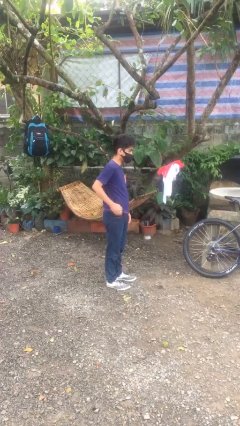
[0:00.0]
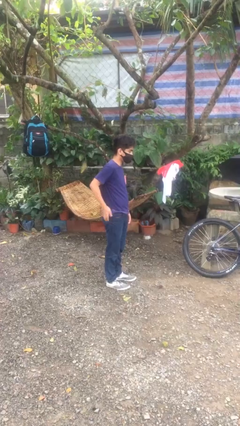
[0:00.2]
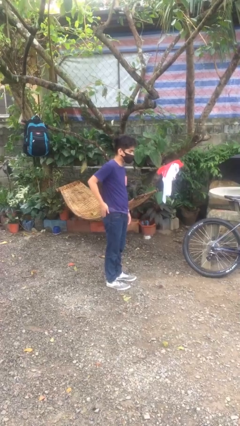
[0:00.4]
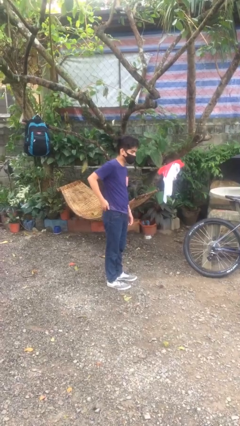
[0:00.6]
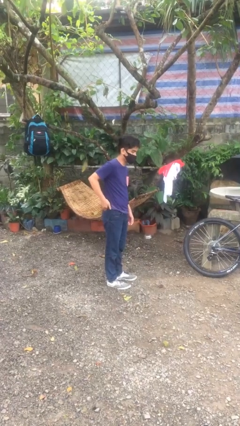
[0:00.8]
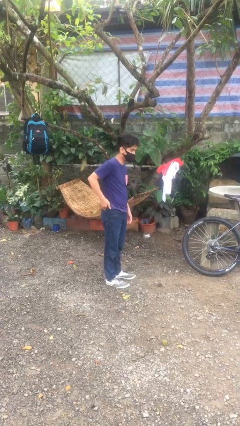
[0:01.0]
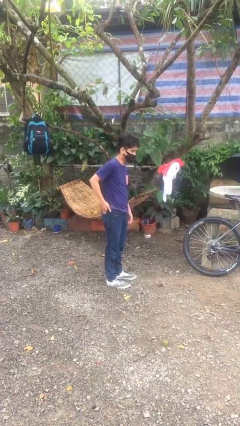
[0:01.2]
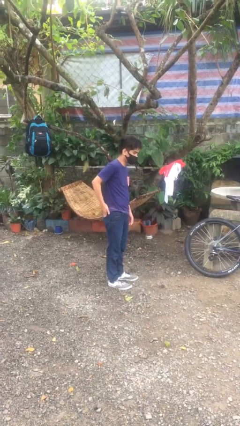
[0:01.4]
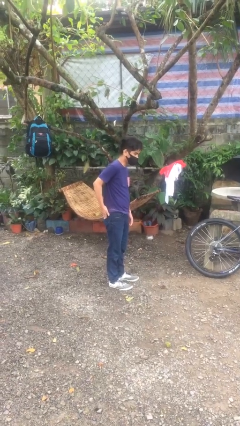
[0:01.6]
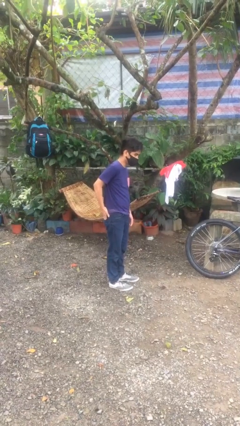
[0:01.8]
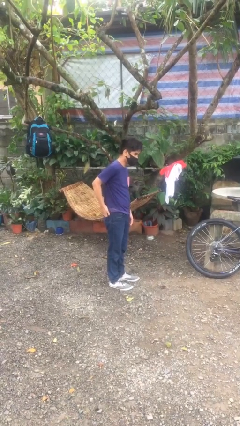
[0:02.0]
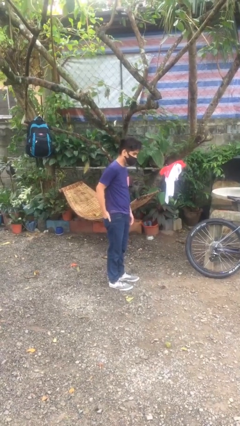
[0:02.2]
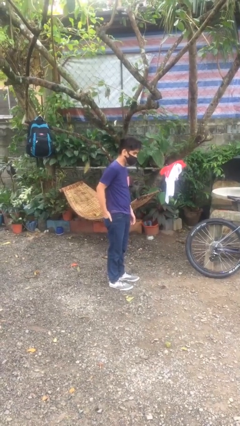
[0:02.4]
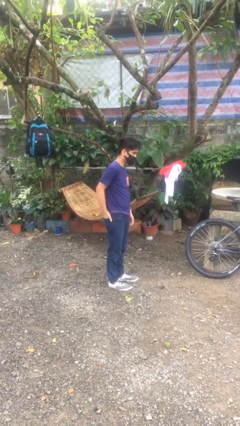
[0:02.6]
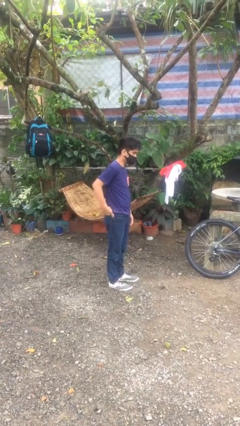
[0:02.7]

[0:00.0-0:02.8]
person puts hands in back pockets

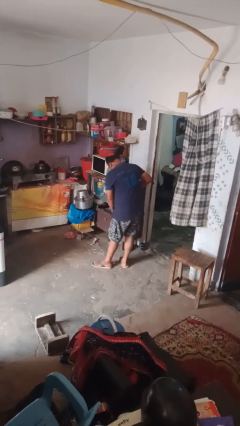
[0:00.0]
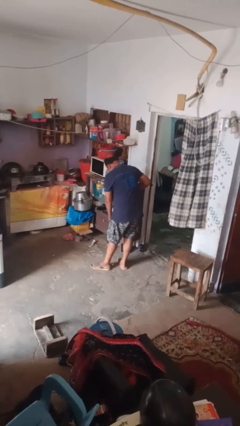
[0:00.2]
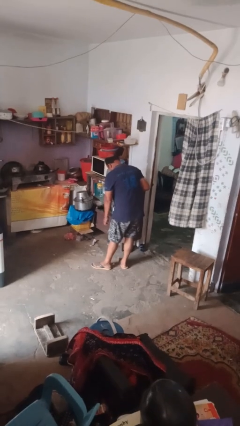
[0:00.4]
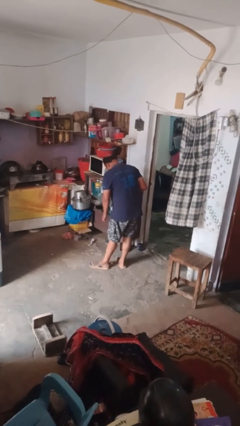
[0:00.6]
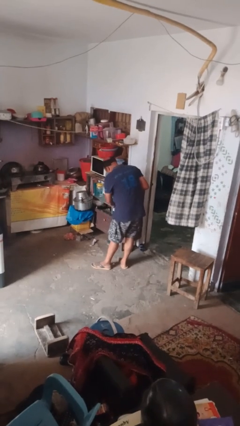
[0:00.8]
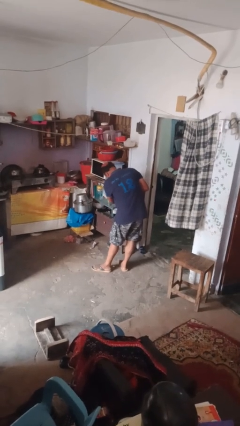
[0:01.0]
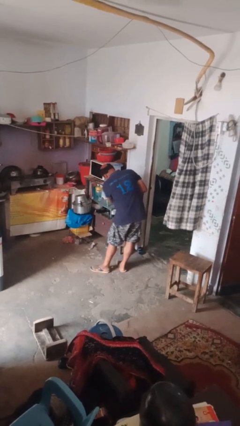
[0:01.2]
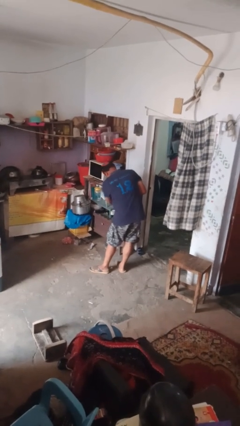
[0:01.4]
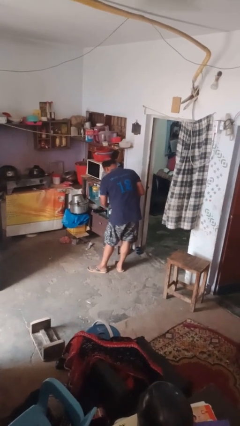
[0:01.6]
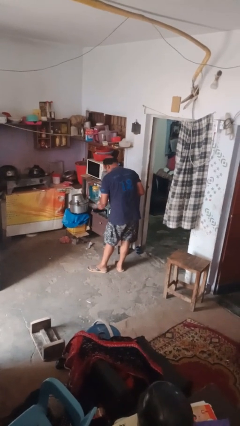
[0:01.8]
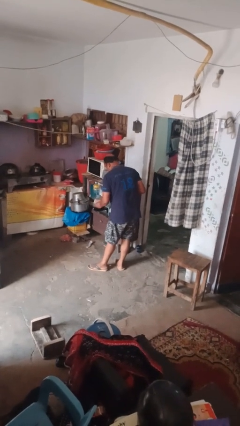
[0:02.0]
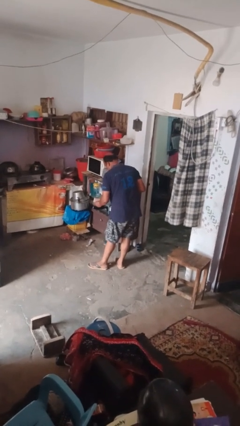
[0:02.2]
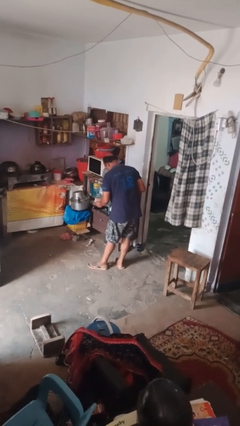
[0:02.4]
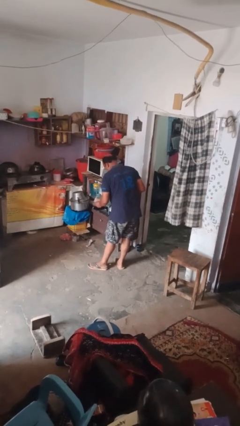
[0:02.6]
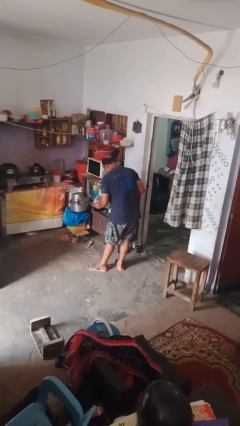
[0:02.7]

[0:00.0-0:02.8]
person takes object from kitchen drawer

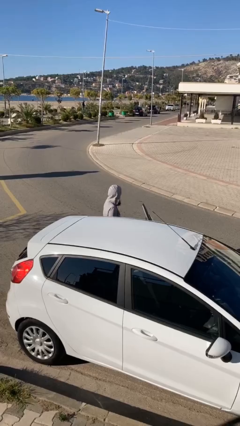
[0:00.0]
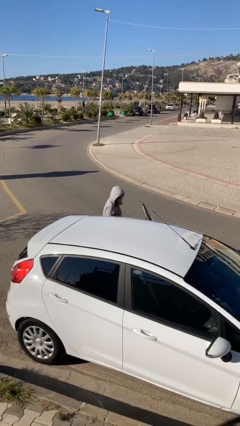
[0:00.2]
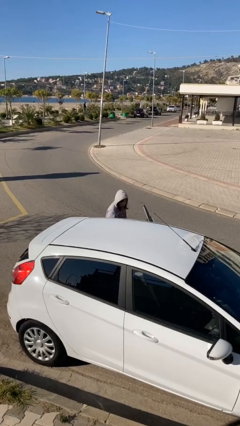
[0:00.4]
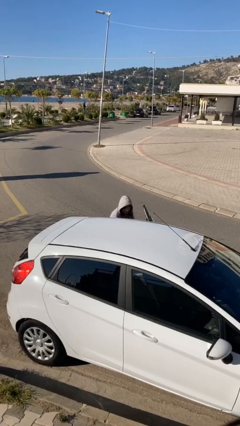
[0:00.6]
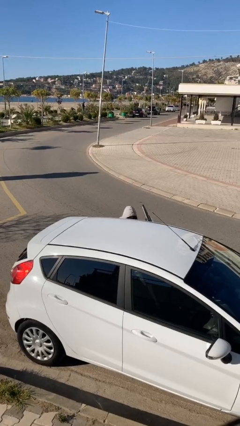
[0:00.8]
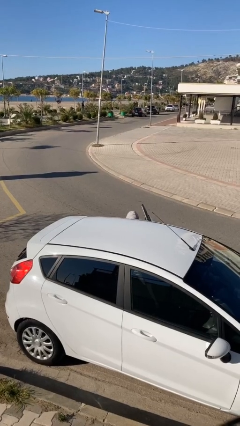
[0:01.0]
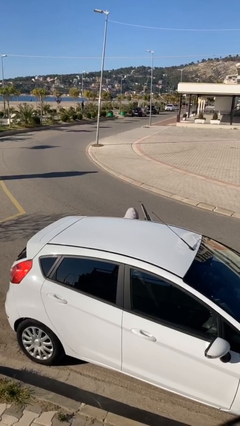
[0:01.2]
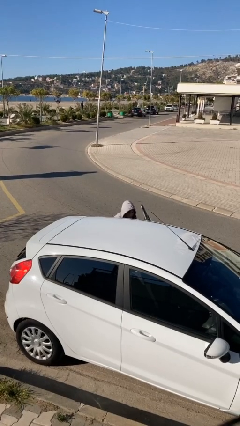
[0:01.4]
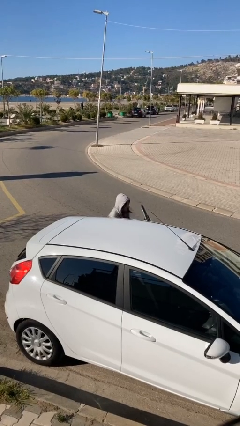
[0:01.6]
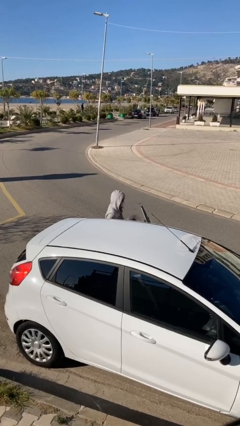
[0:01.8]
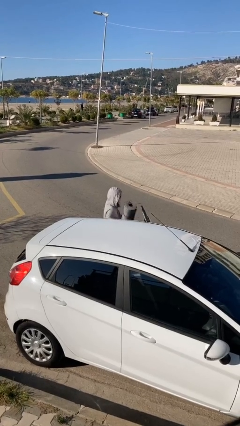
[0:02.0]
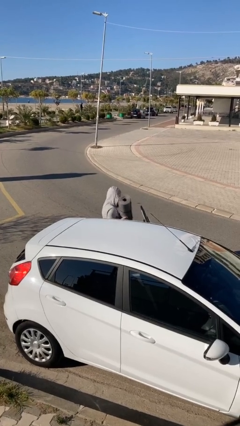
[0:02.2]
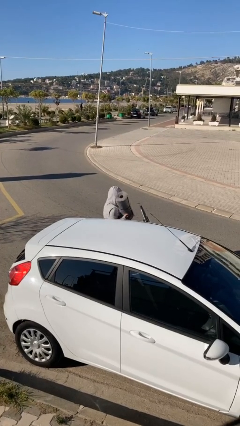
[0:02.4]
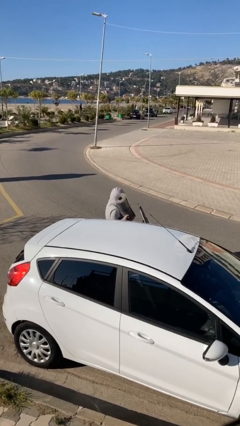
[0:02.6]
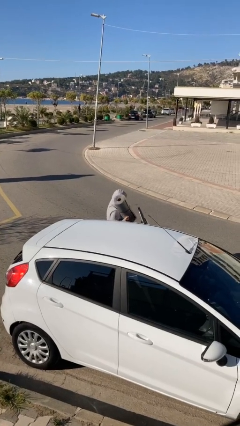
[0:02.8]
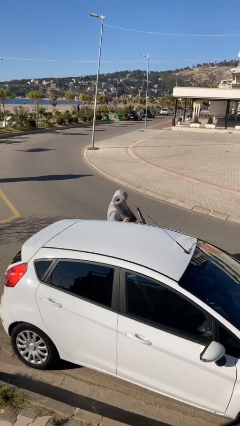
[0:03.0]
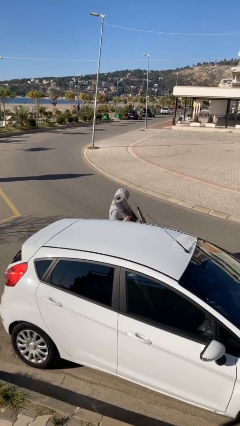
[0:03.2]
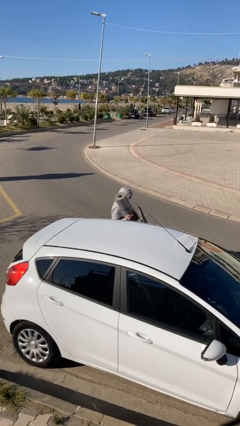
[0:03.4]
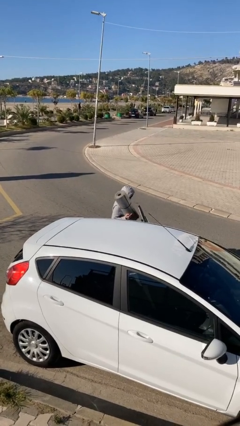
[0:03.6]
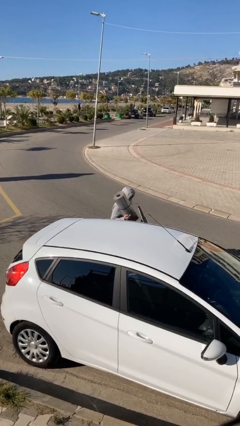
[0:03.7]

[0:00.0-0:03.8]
person unloads car

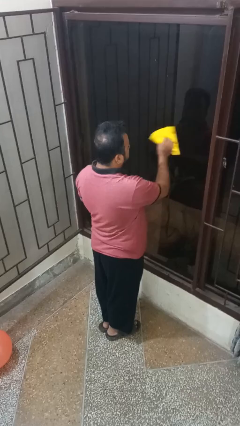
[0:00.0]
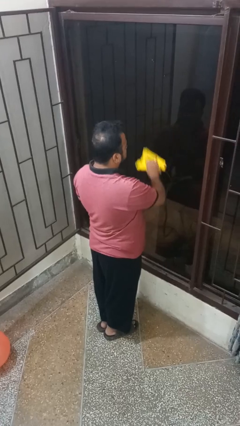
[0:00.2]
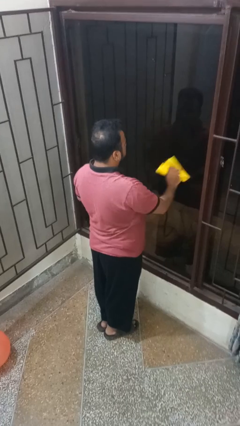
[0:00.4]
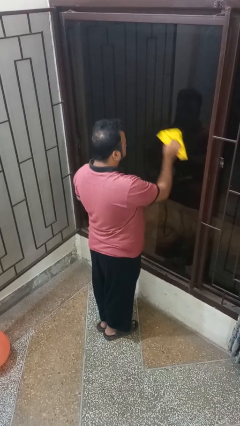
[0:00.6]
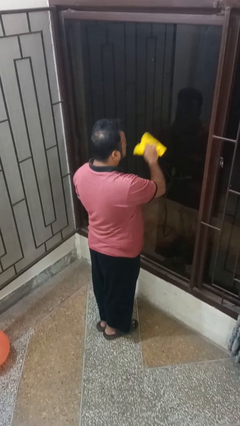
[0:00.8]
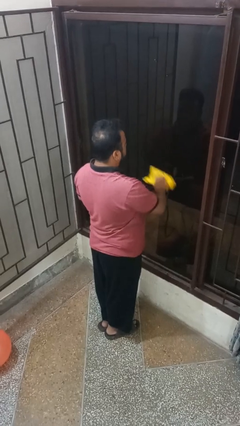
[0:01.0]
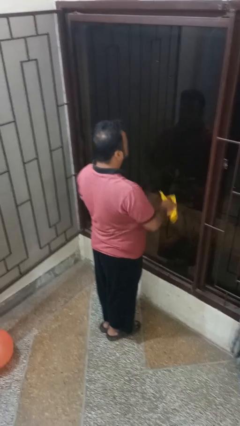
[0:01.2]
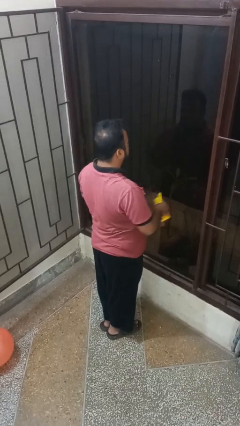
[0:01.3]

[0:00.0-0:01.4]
person washes window

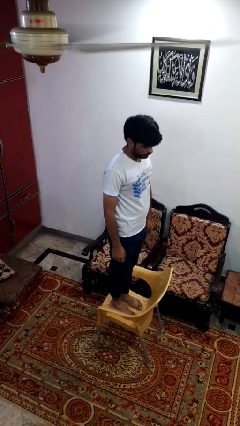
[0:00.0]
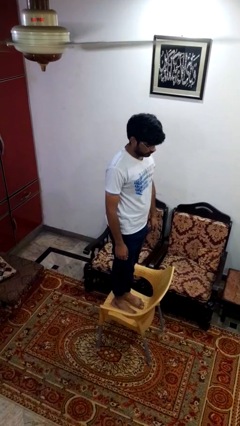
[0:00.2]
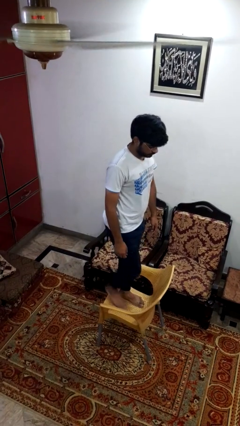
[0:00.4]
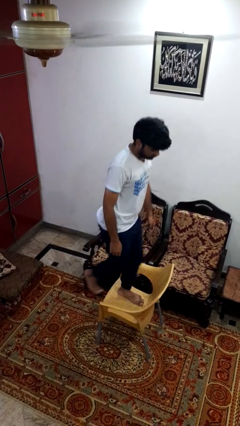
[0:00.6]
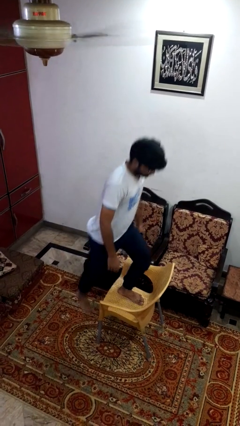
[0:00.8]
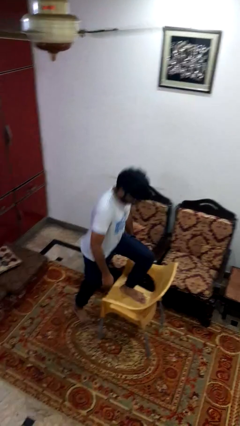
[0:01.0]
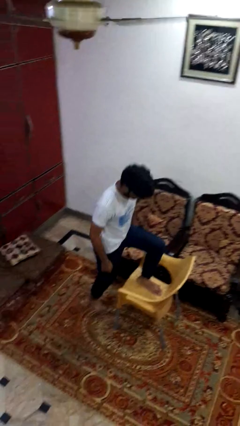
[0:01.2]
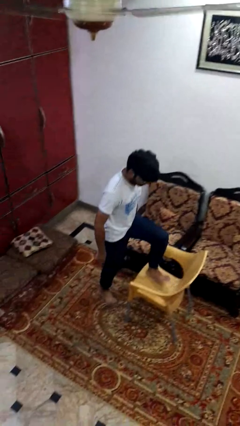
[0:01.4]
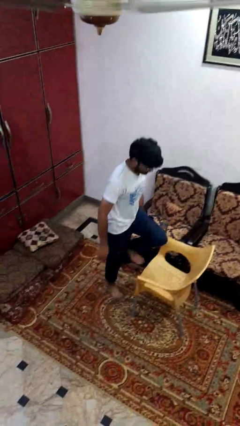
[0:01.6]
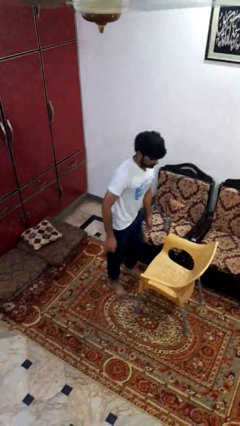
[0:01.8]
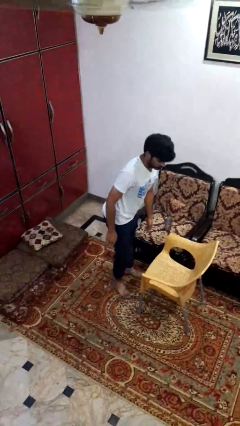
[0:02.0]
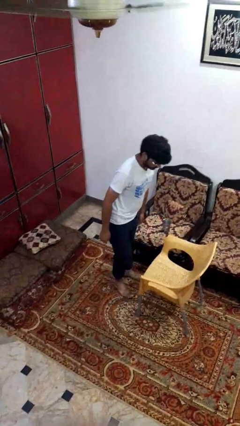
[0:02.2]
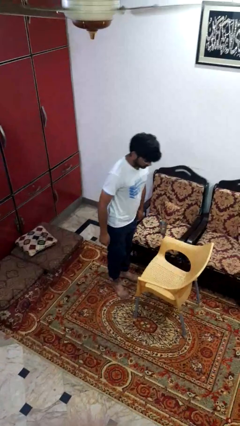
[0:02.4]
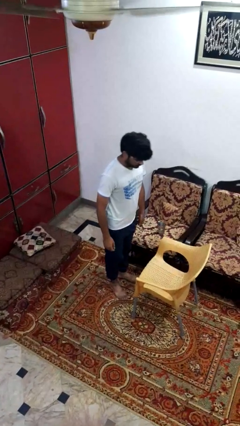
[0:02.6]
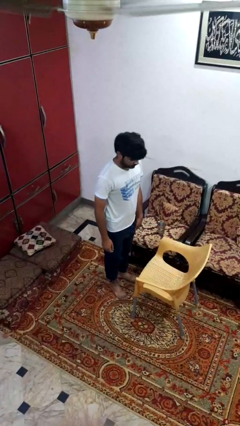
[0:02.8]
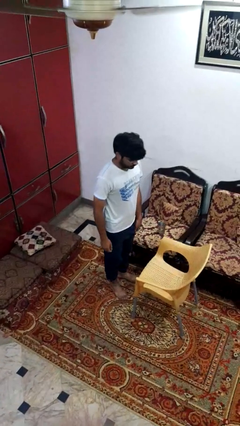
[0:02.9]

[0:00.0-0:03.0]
person climbs off chair

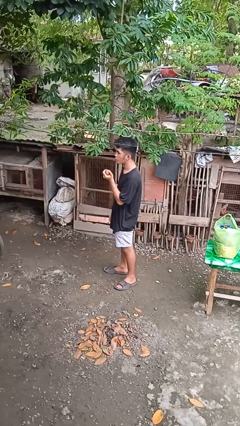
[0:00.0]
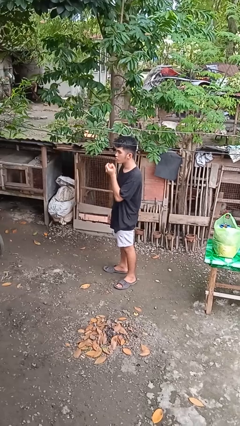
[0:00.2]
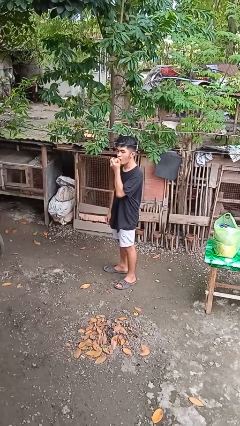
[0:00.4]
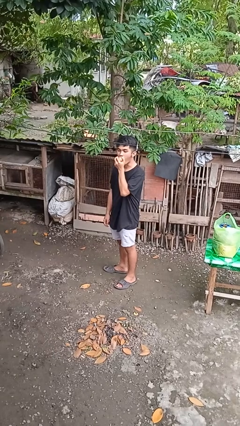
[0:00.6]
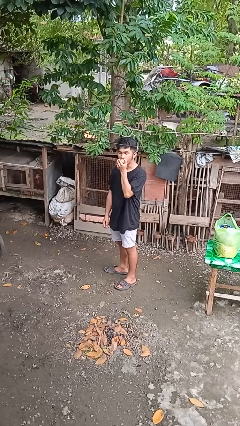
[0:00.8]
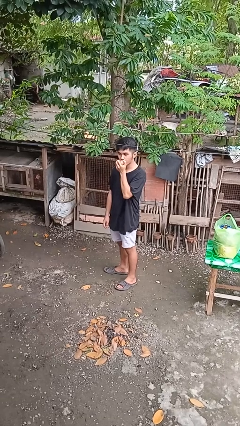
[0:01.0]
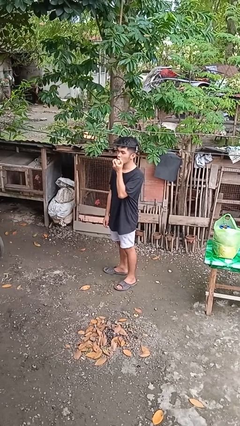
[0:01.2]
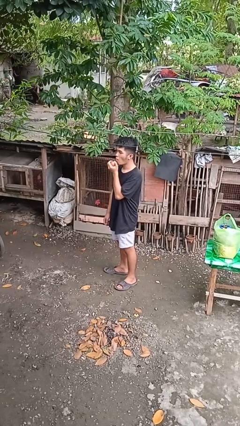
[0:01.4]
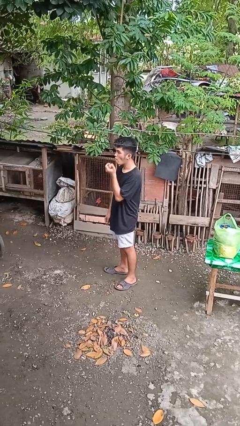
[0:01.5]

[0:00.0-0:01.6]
person eats apple

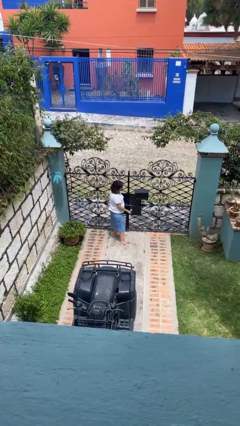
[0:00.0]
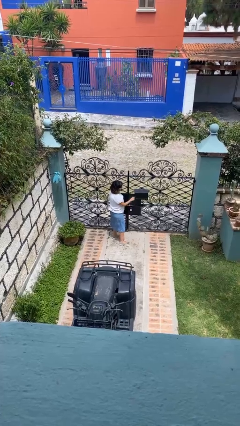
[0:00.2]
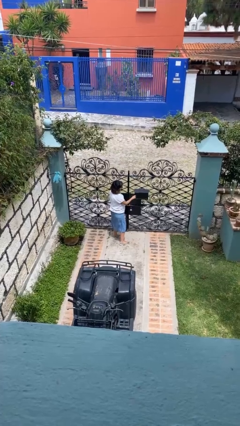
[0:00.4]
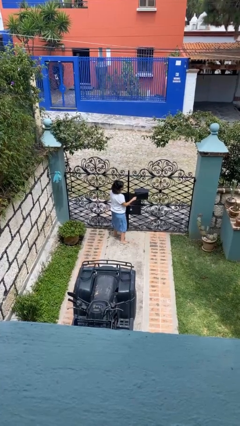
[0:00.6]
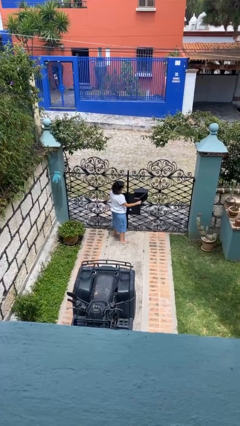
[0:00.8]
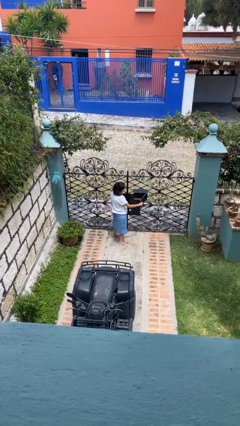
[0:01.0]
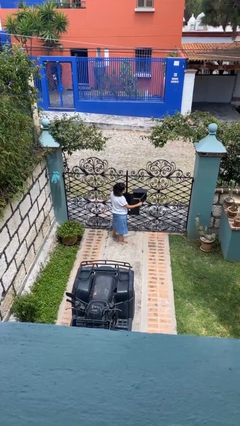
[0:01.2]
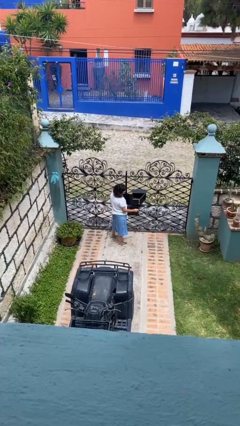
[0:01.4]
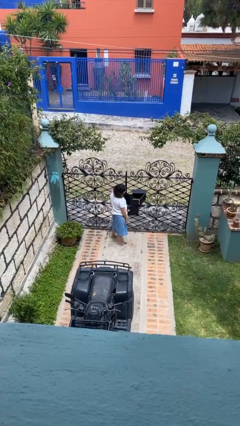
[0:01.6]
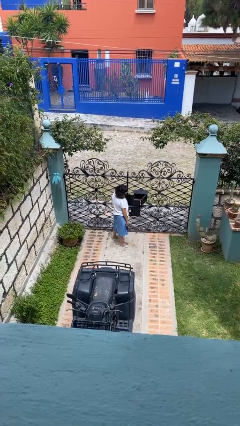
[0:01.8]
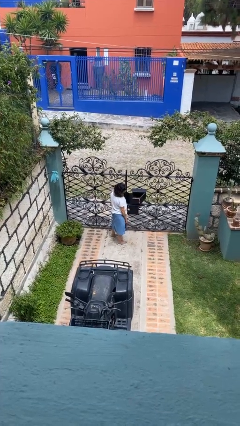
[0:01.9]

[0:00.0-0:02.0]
person opens mailbox
